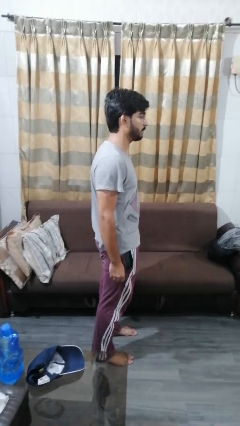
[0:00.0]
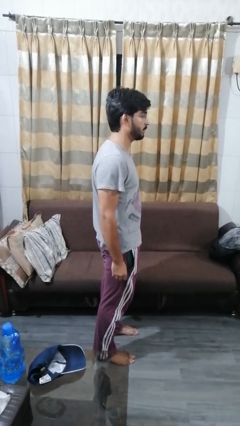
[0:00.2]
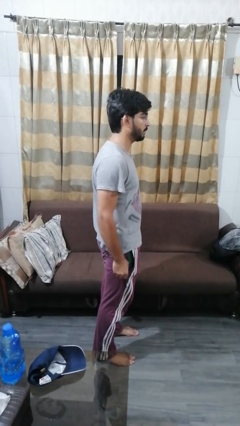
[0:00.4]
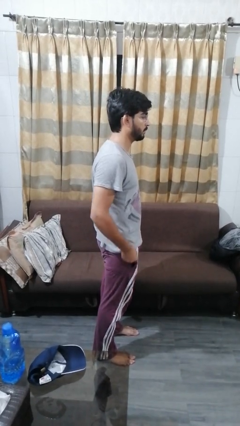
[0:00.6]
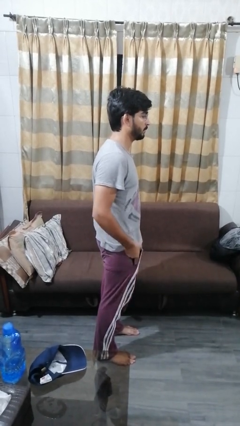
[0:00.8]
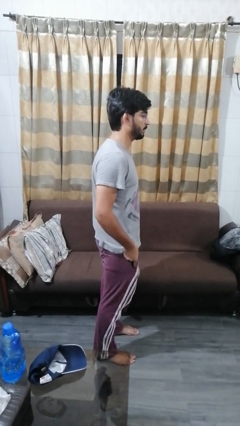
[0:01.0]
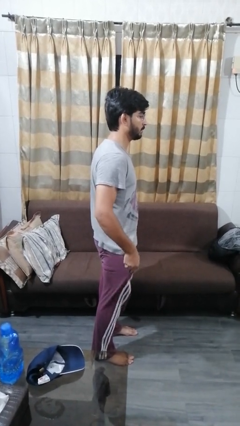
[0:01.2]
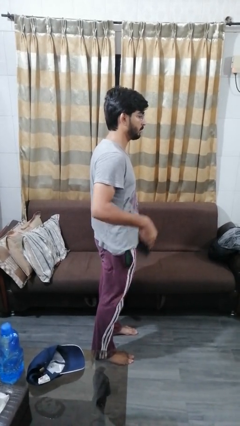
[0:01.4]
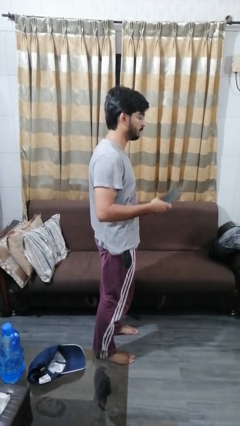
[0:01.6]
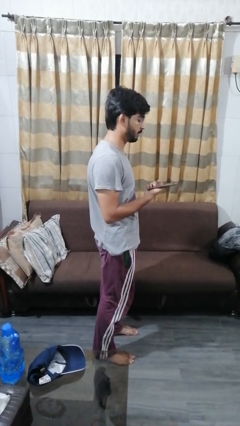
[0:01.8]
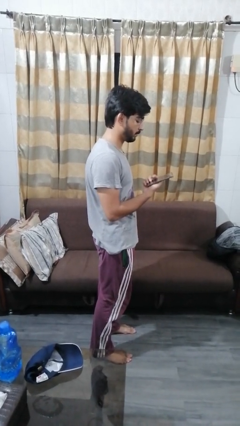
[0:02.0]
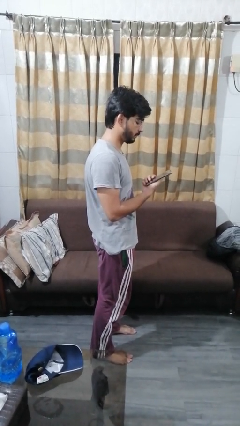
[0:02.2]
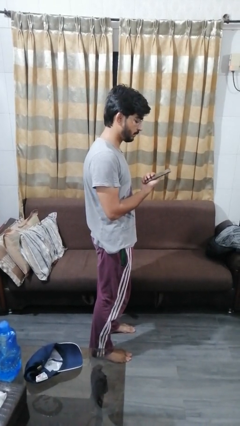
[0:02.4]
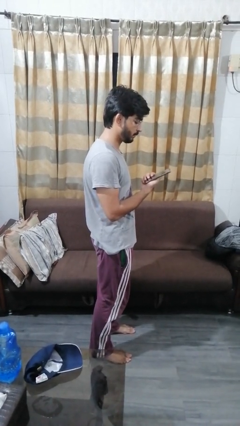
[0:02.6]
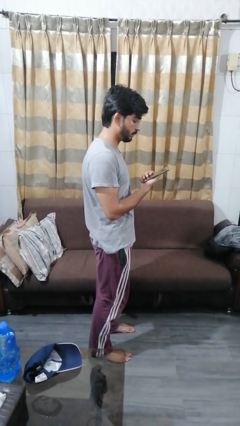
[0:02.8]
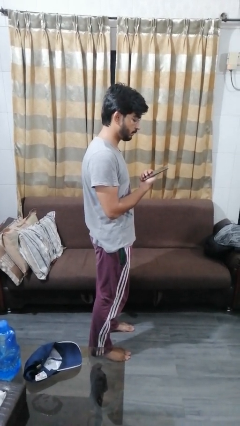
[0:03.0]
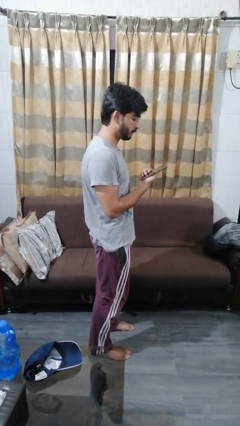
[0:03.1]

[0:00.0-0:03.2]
person takes phone from pocket

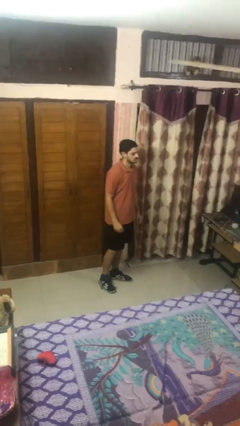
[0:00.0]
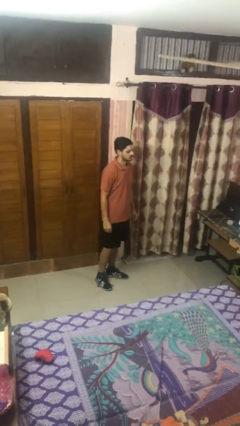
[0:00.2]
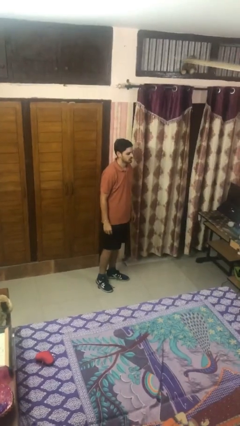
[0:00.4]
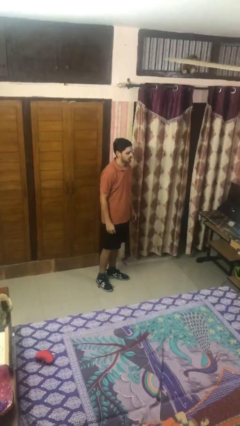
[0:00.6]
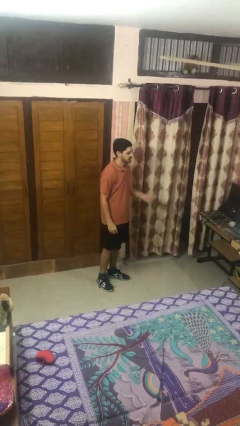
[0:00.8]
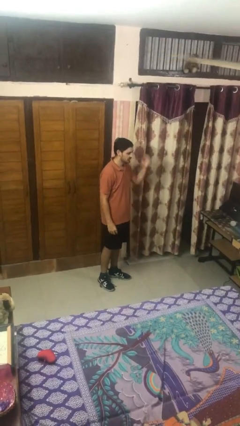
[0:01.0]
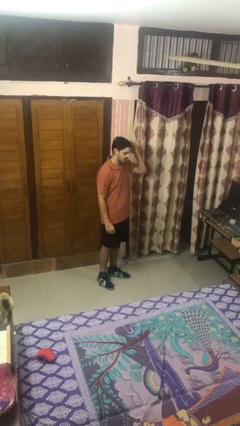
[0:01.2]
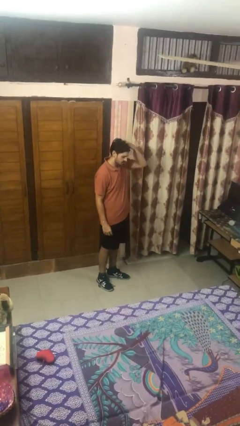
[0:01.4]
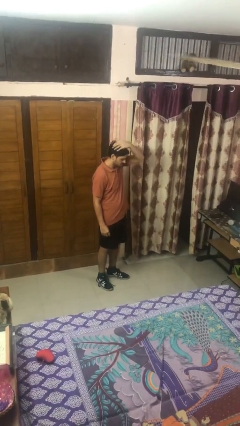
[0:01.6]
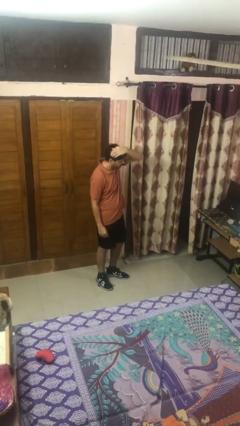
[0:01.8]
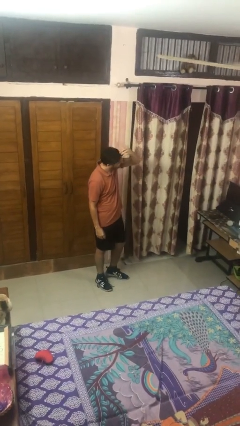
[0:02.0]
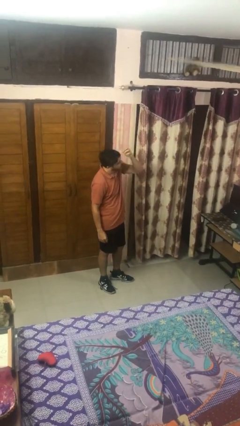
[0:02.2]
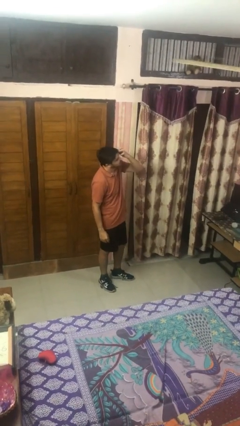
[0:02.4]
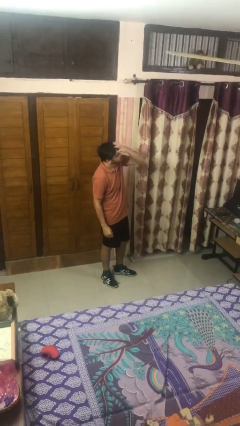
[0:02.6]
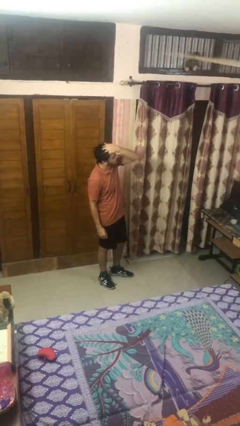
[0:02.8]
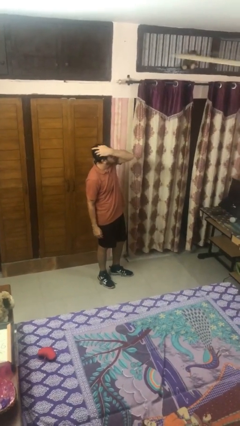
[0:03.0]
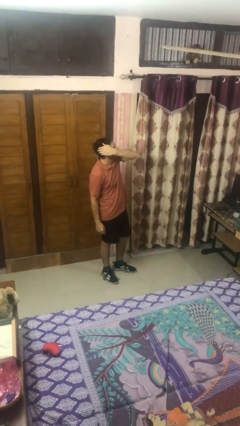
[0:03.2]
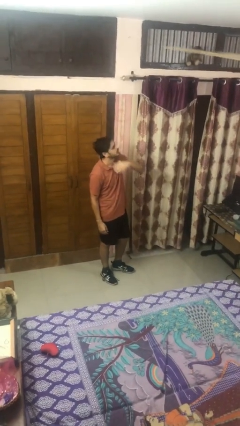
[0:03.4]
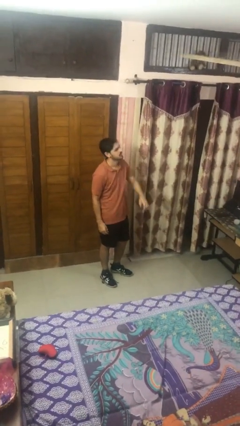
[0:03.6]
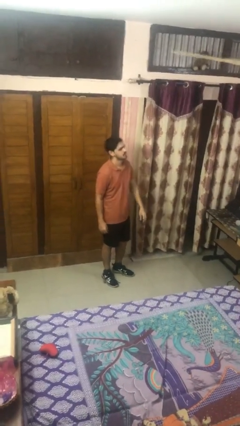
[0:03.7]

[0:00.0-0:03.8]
person strokes hair

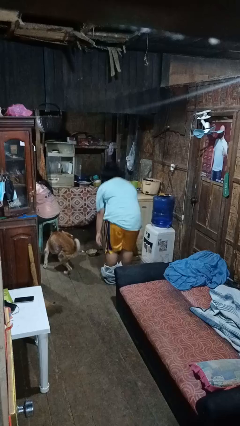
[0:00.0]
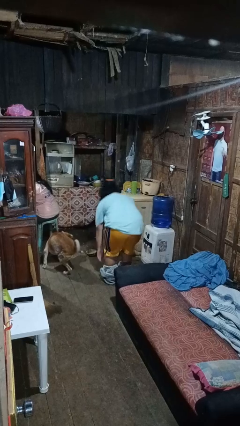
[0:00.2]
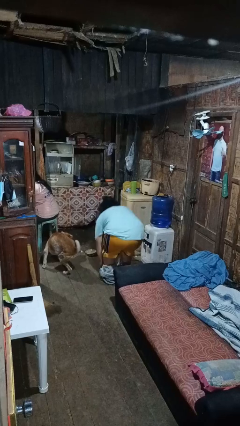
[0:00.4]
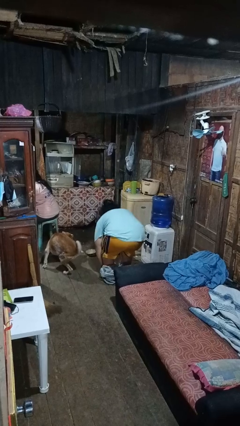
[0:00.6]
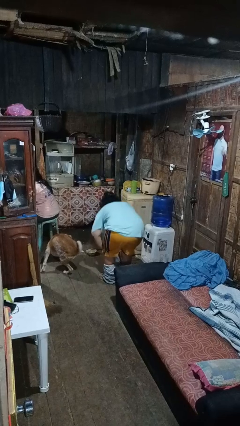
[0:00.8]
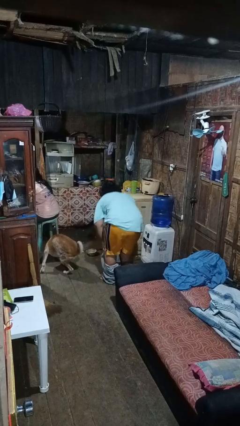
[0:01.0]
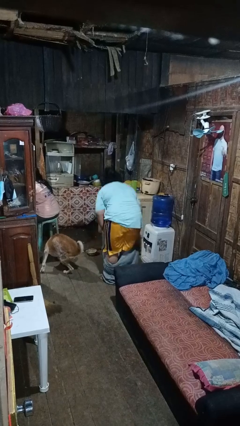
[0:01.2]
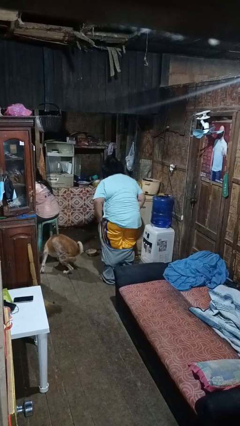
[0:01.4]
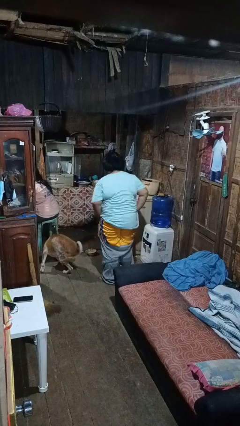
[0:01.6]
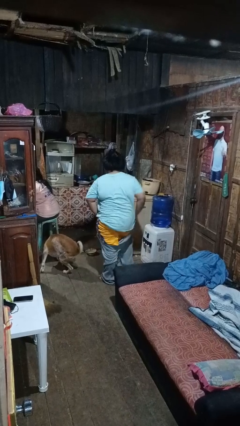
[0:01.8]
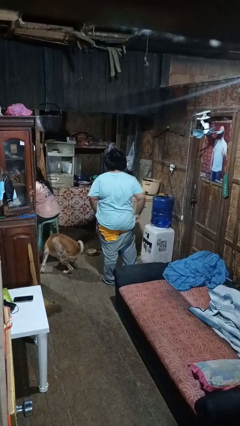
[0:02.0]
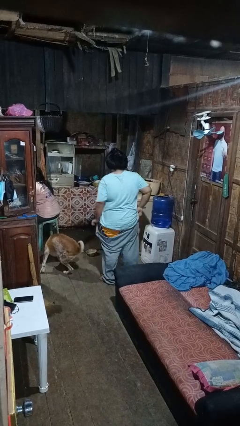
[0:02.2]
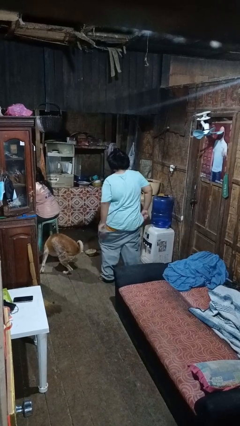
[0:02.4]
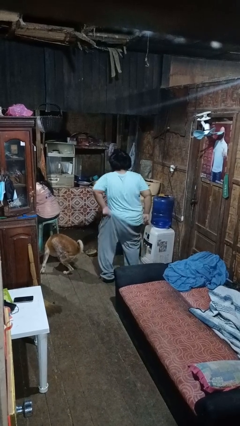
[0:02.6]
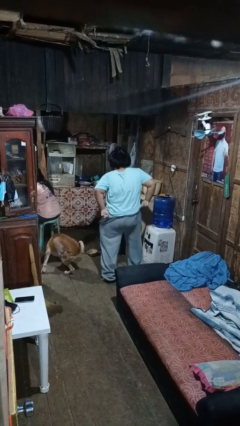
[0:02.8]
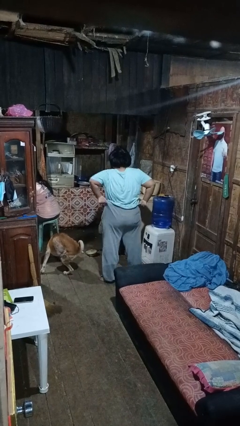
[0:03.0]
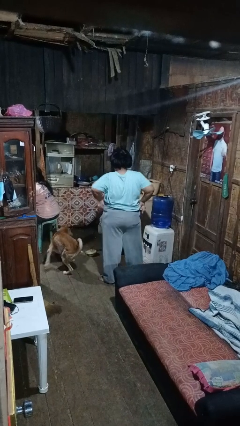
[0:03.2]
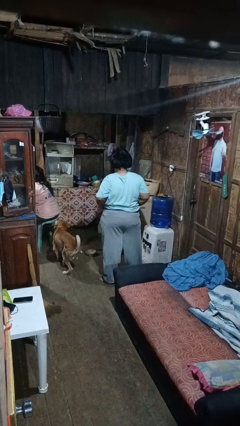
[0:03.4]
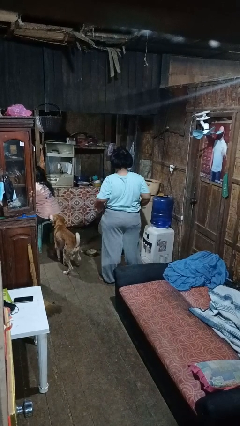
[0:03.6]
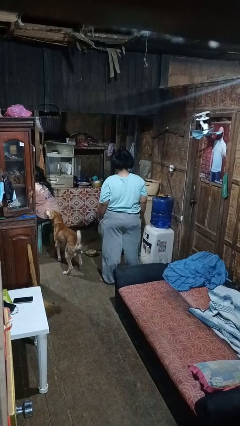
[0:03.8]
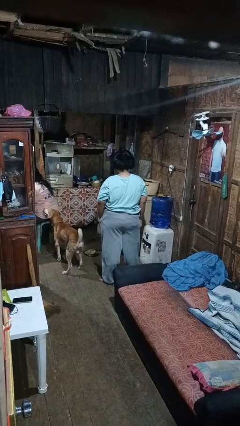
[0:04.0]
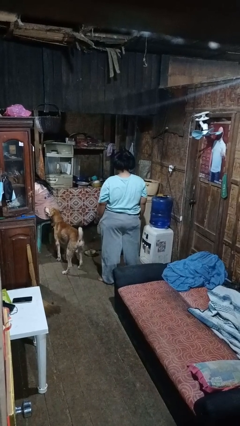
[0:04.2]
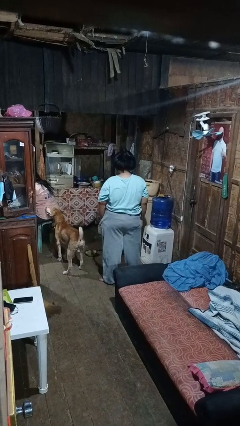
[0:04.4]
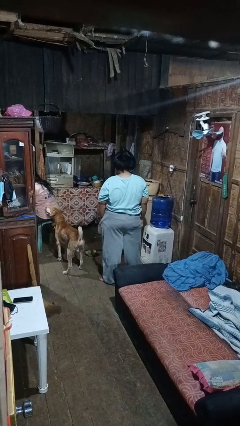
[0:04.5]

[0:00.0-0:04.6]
person puts on pants

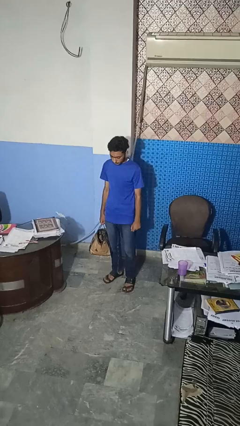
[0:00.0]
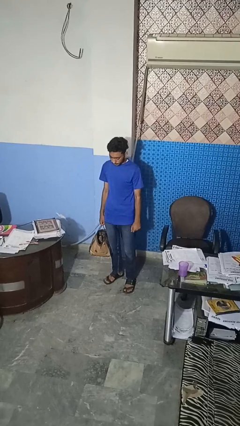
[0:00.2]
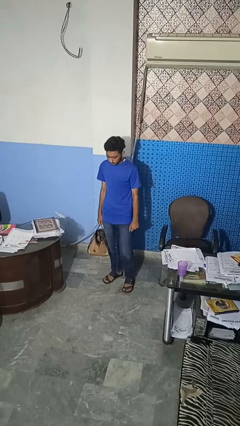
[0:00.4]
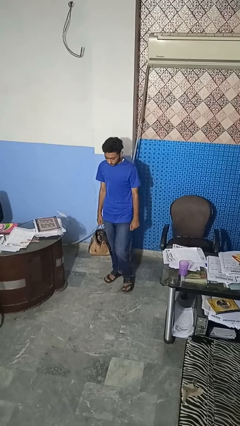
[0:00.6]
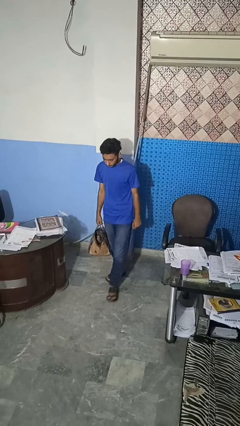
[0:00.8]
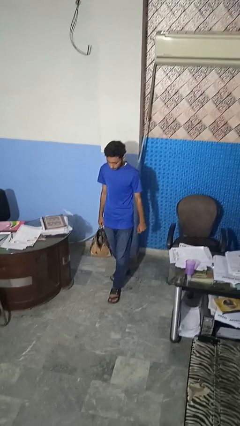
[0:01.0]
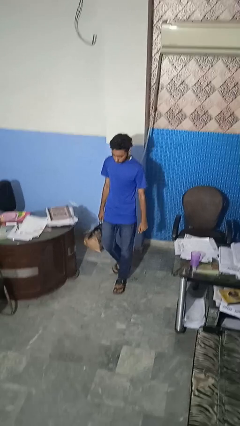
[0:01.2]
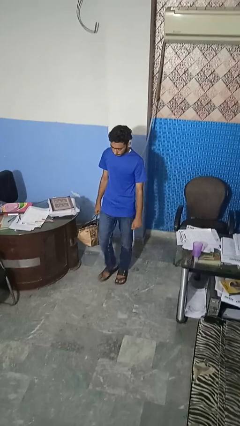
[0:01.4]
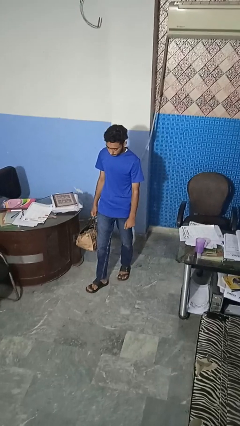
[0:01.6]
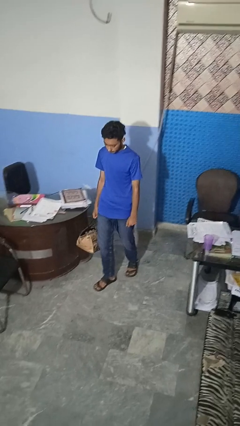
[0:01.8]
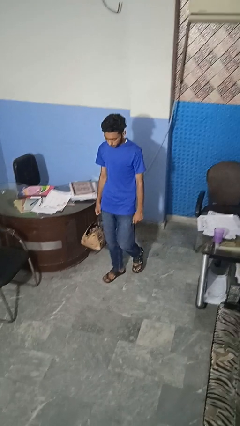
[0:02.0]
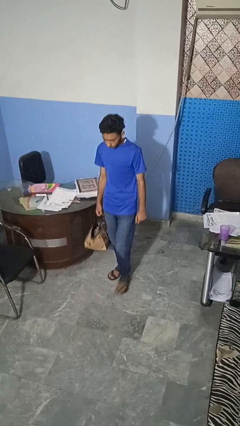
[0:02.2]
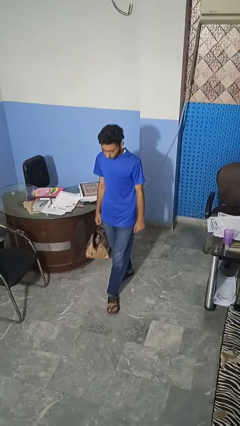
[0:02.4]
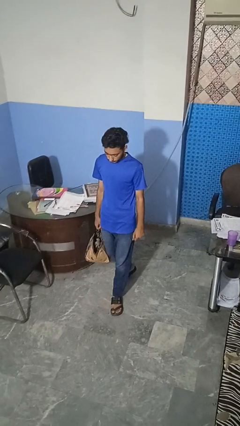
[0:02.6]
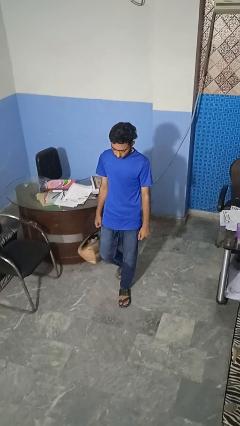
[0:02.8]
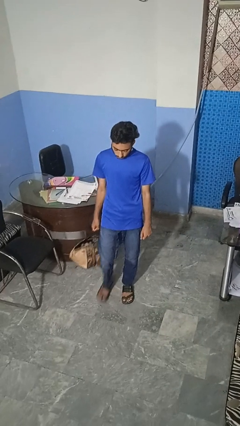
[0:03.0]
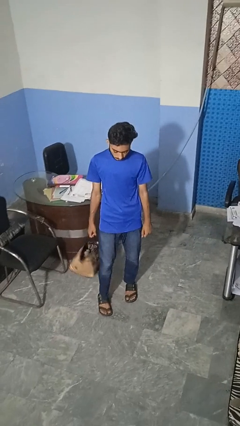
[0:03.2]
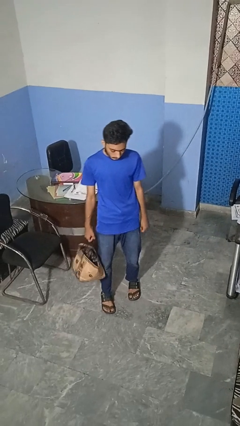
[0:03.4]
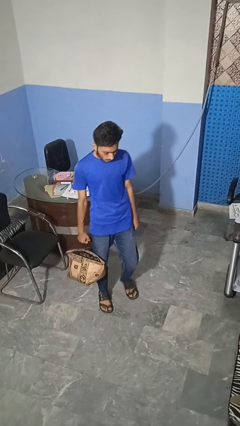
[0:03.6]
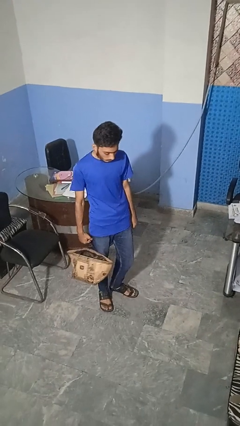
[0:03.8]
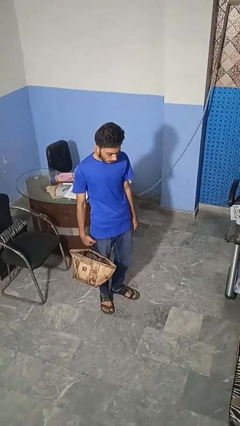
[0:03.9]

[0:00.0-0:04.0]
person carries groceries

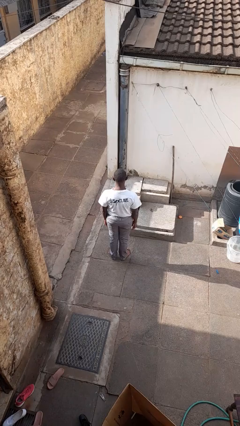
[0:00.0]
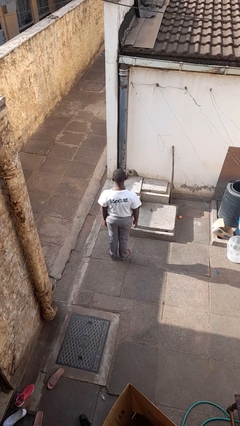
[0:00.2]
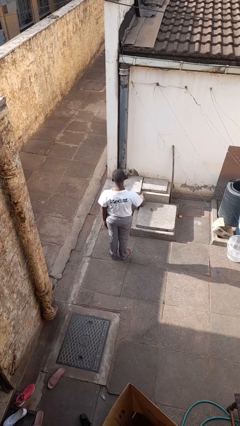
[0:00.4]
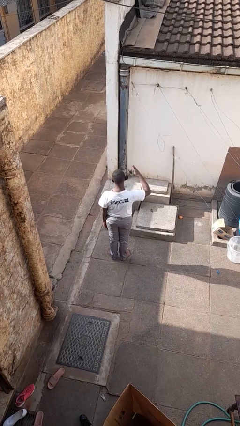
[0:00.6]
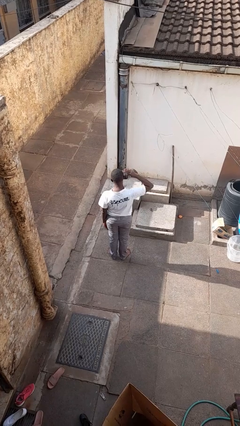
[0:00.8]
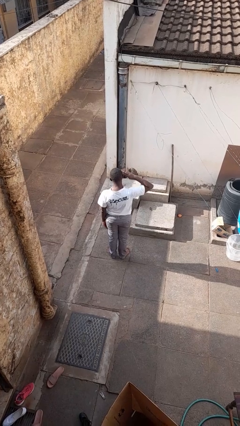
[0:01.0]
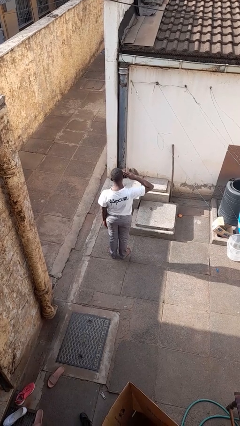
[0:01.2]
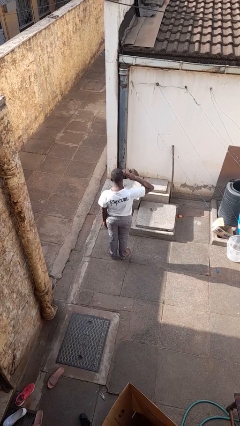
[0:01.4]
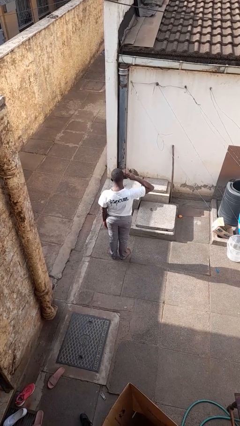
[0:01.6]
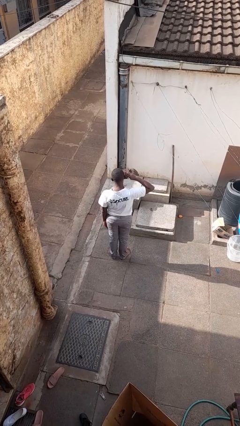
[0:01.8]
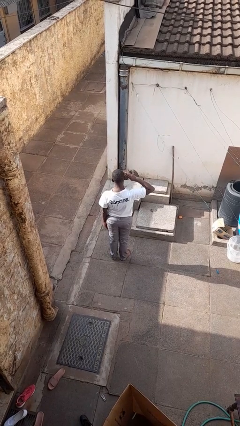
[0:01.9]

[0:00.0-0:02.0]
person salutes

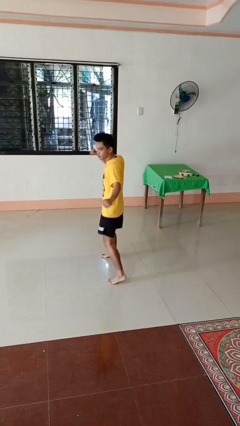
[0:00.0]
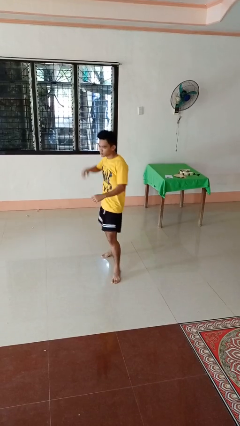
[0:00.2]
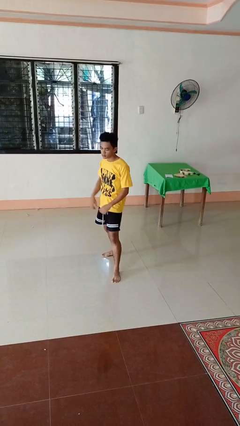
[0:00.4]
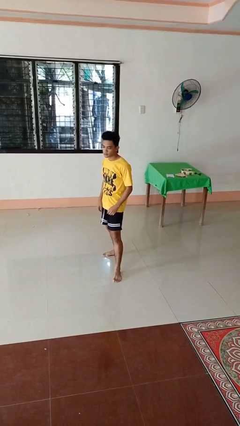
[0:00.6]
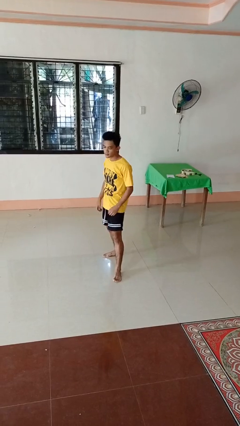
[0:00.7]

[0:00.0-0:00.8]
person karate chop
